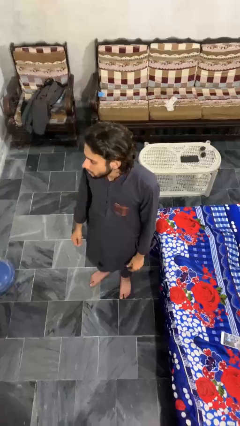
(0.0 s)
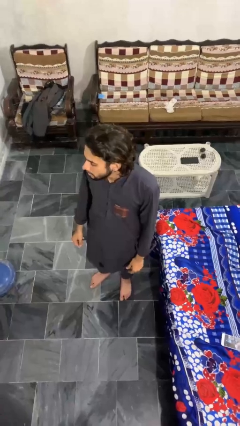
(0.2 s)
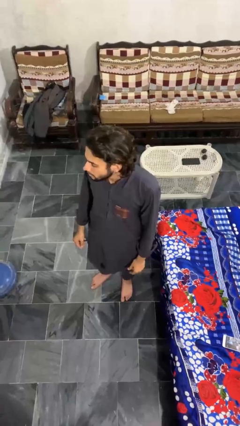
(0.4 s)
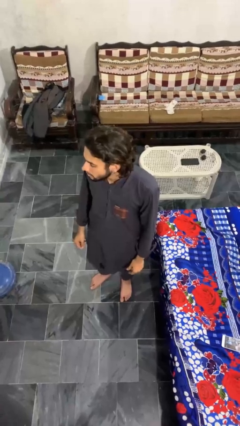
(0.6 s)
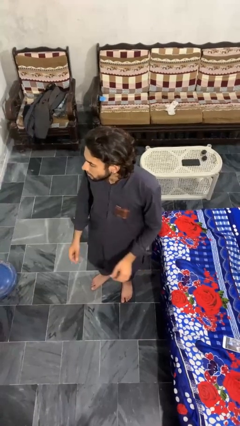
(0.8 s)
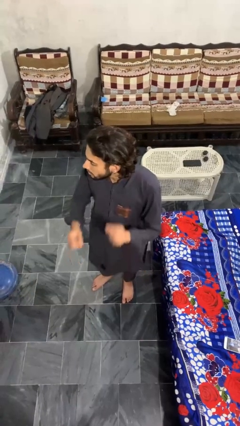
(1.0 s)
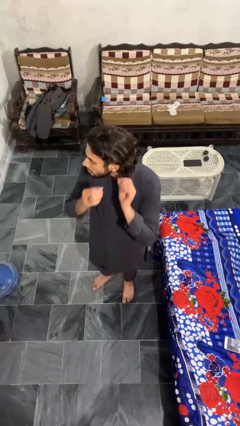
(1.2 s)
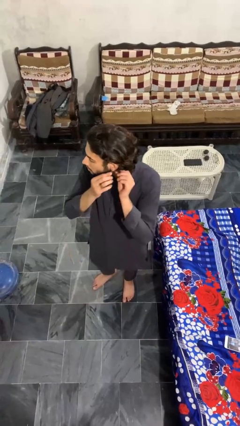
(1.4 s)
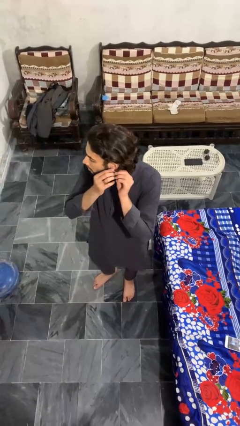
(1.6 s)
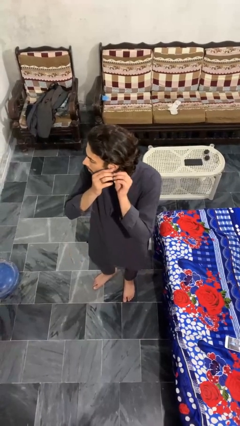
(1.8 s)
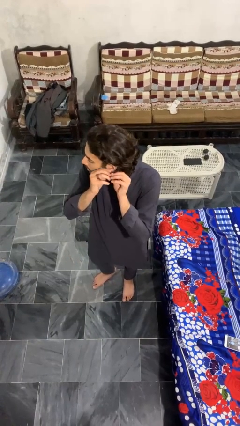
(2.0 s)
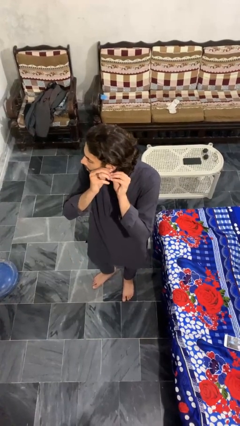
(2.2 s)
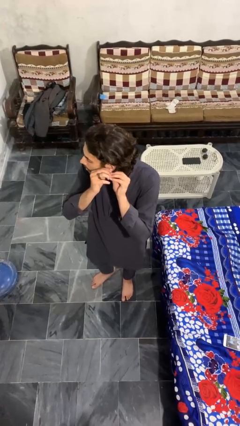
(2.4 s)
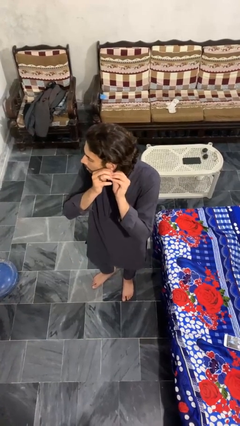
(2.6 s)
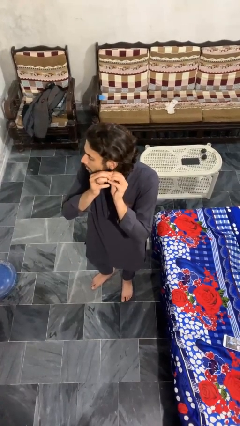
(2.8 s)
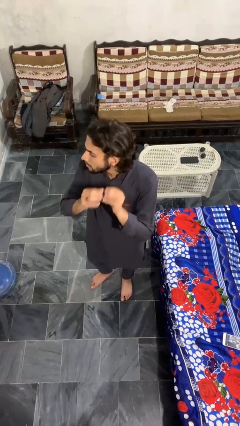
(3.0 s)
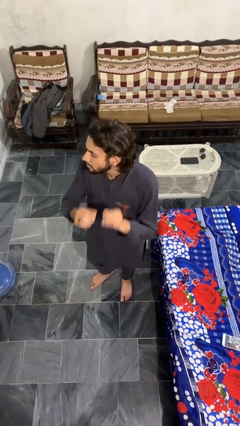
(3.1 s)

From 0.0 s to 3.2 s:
person takes off earrings

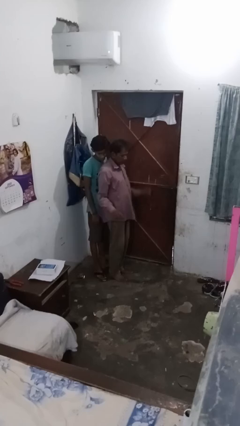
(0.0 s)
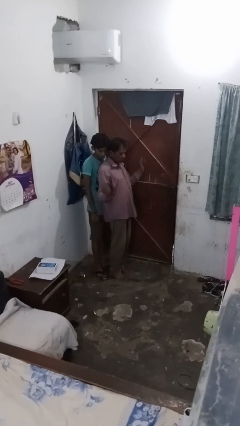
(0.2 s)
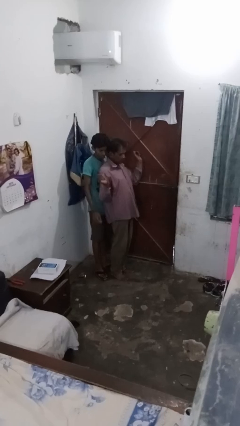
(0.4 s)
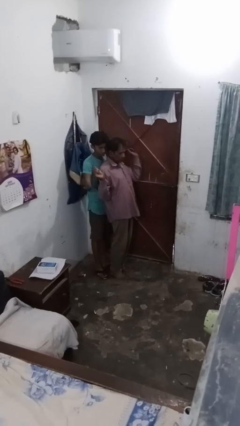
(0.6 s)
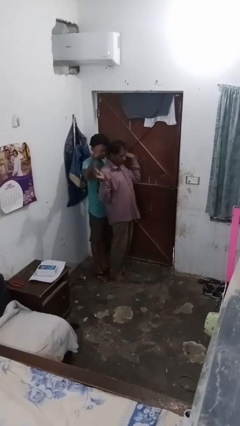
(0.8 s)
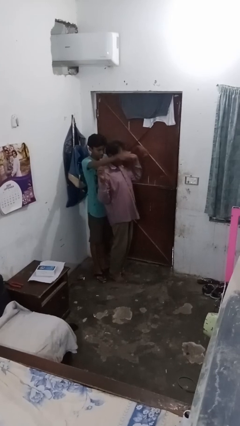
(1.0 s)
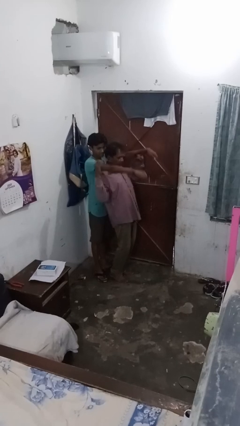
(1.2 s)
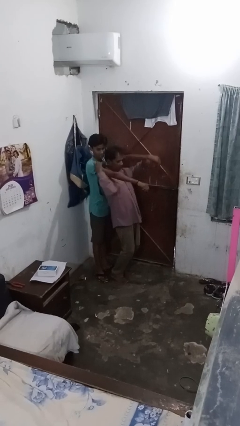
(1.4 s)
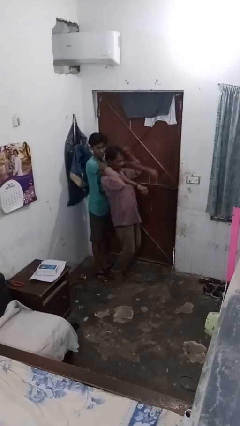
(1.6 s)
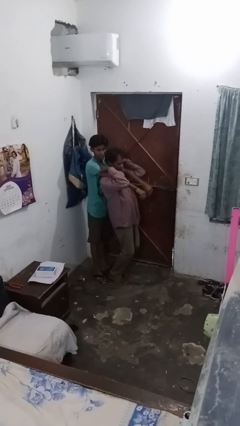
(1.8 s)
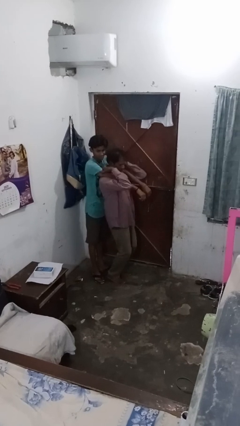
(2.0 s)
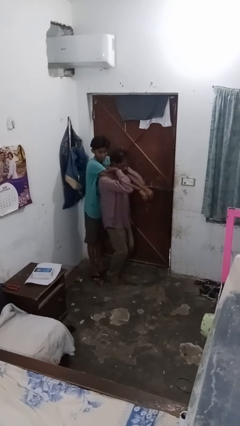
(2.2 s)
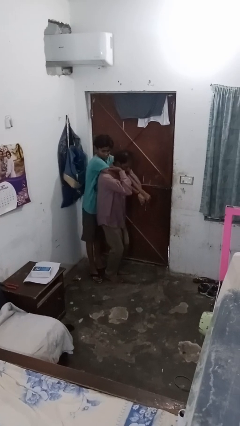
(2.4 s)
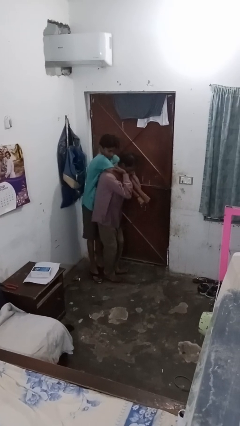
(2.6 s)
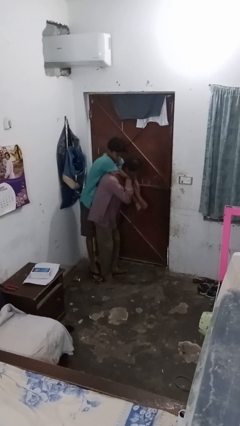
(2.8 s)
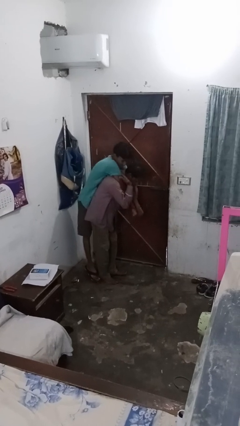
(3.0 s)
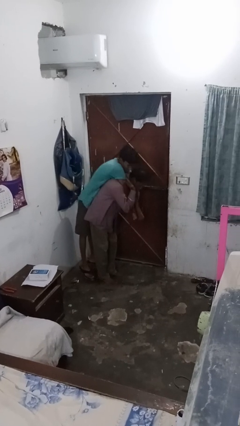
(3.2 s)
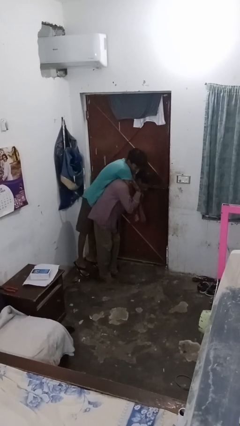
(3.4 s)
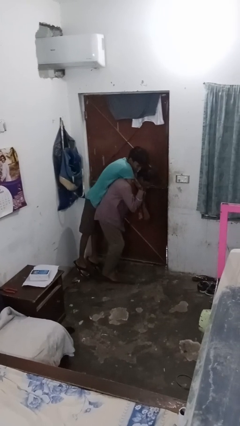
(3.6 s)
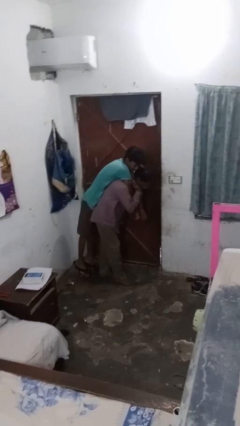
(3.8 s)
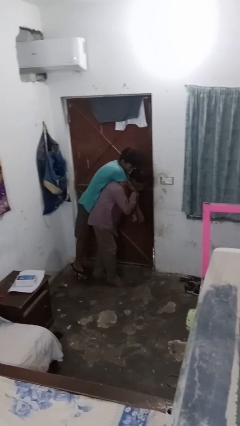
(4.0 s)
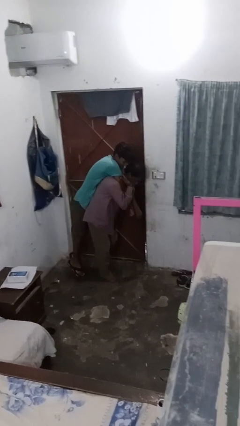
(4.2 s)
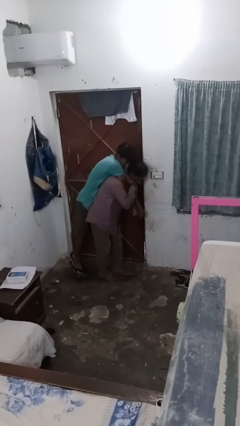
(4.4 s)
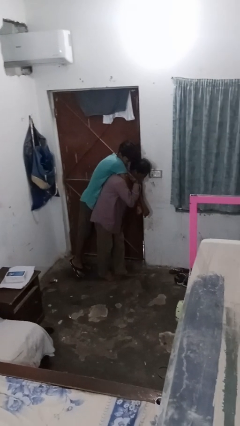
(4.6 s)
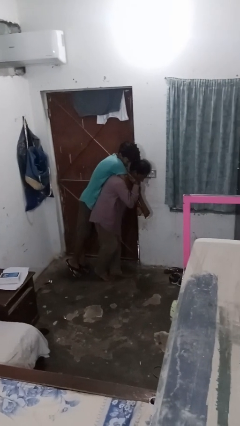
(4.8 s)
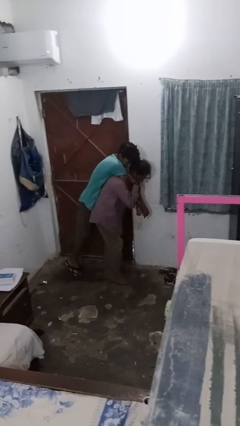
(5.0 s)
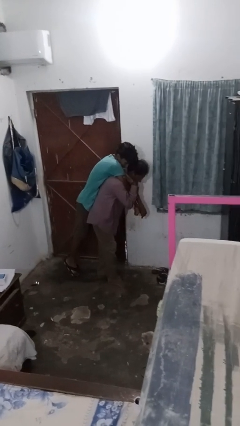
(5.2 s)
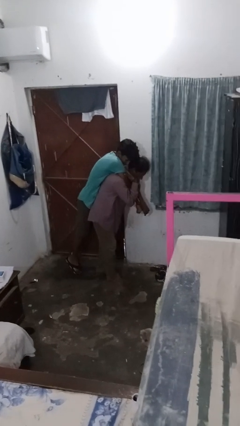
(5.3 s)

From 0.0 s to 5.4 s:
person carries person on back

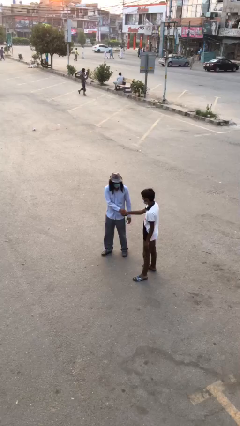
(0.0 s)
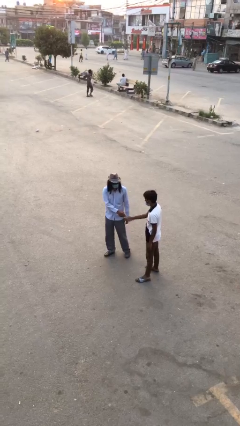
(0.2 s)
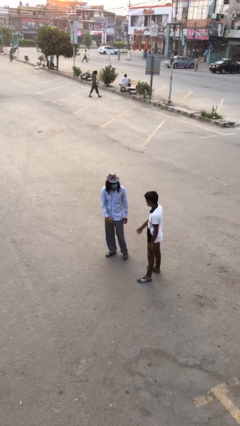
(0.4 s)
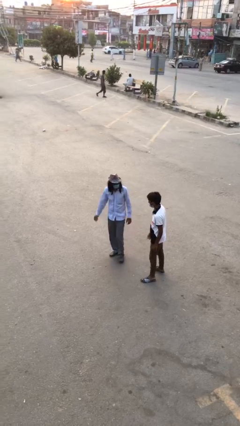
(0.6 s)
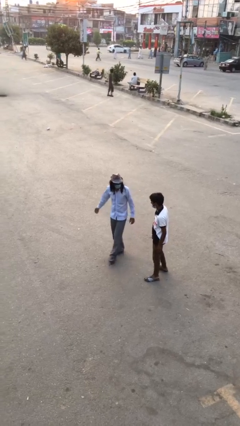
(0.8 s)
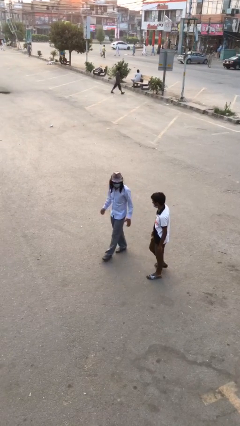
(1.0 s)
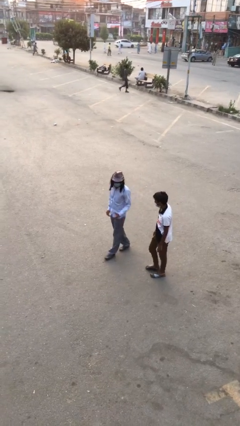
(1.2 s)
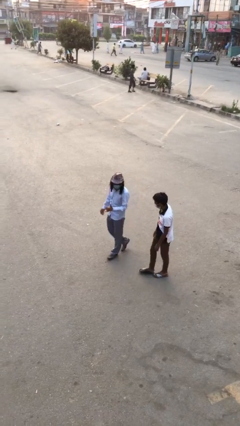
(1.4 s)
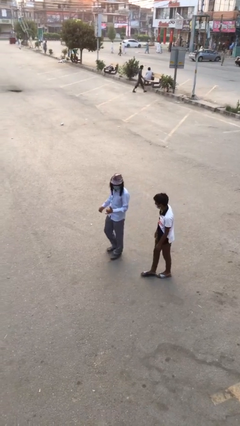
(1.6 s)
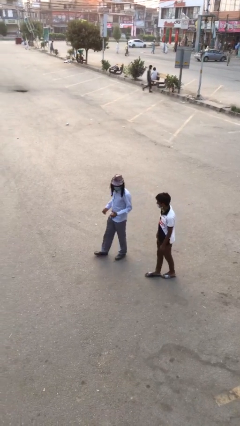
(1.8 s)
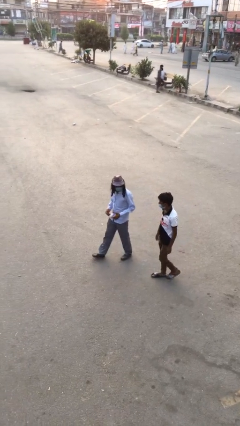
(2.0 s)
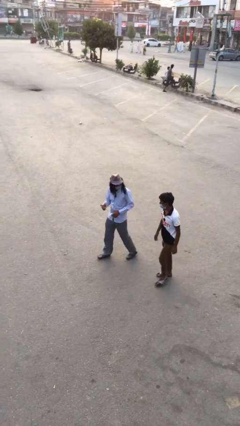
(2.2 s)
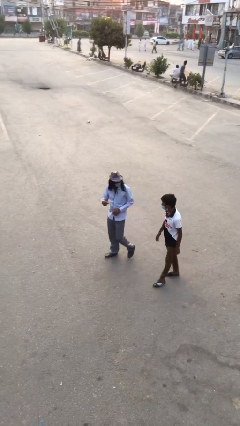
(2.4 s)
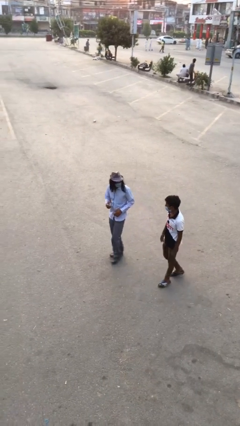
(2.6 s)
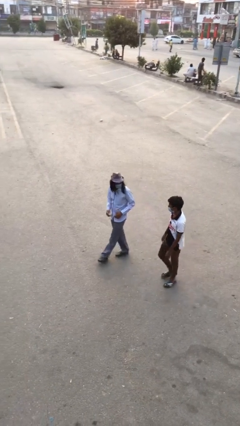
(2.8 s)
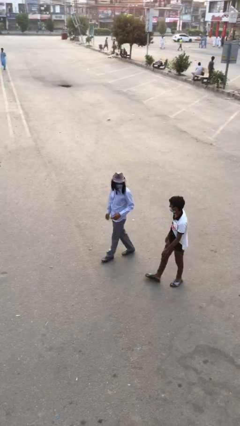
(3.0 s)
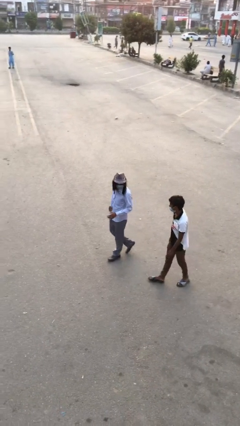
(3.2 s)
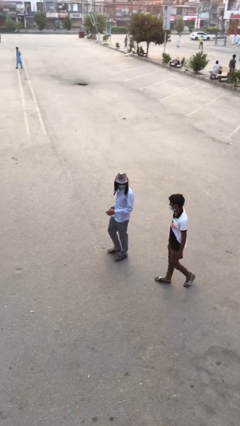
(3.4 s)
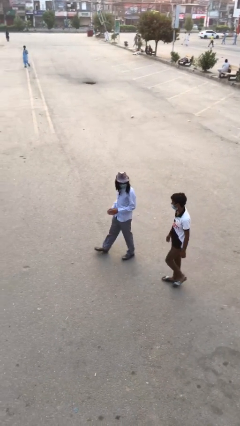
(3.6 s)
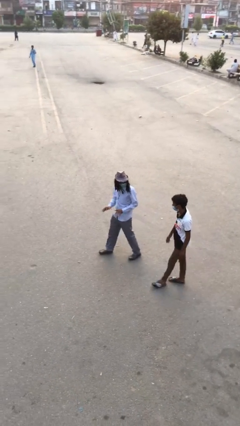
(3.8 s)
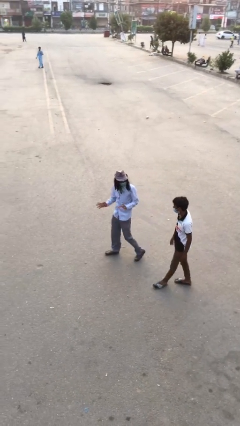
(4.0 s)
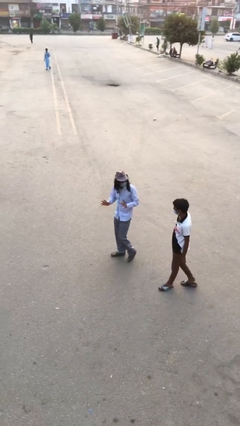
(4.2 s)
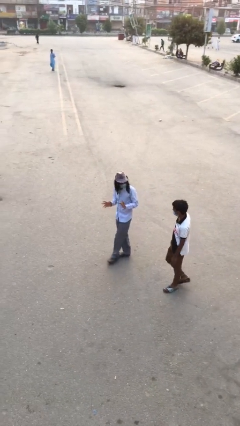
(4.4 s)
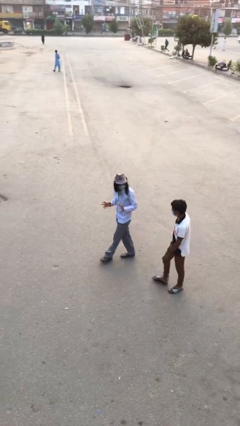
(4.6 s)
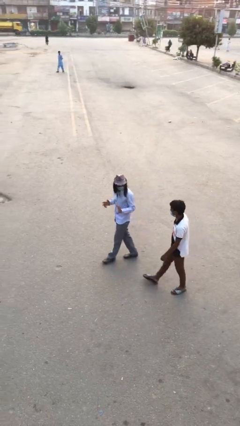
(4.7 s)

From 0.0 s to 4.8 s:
person talks to person

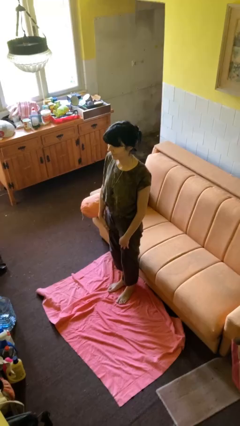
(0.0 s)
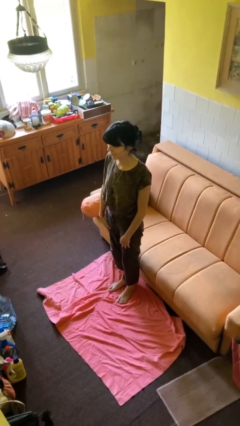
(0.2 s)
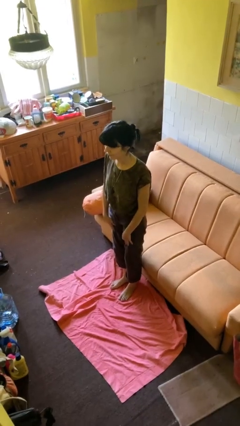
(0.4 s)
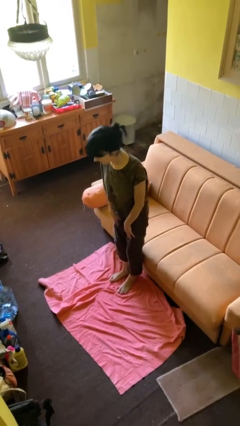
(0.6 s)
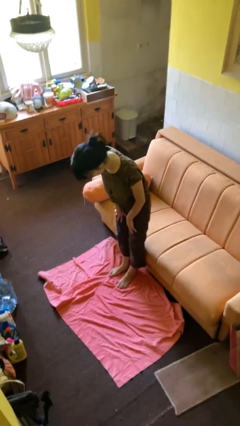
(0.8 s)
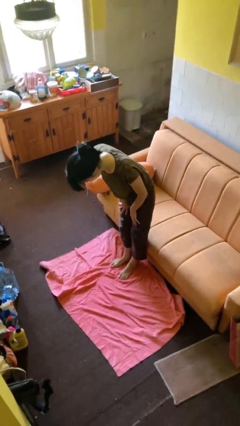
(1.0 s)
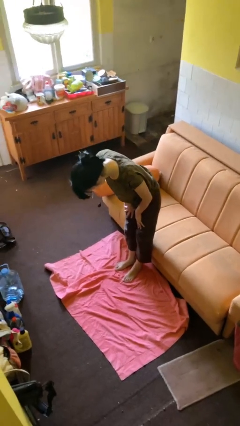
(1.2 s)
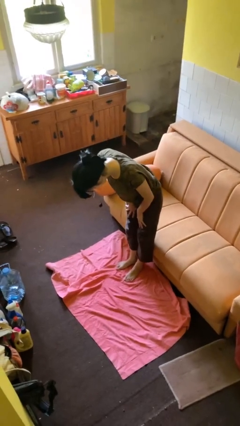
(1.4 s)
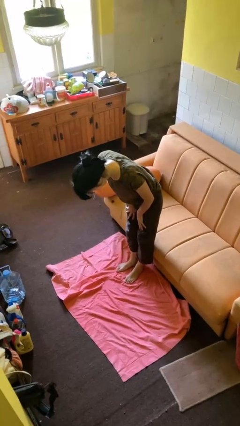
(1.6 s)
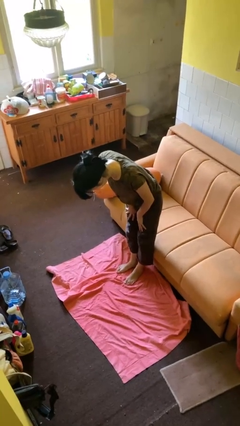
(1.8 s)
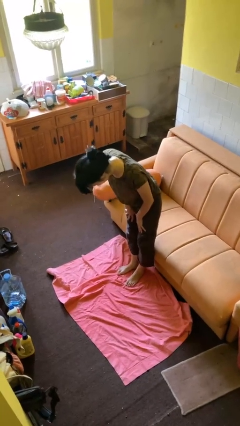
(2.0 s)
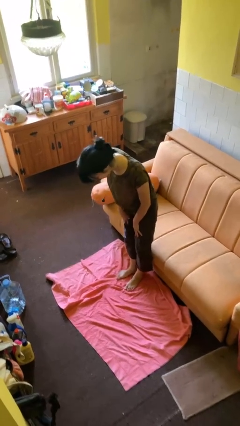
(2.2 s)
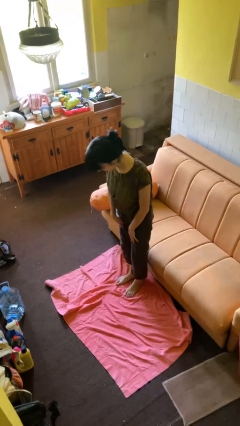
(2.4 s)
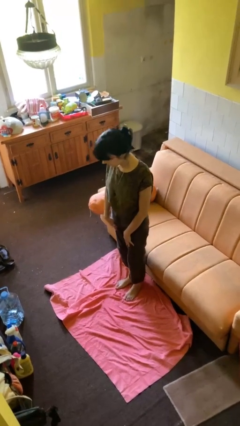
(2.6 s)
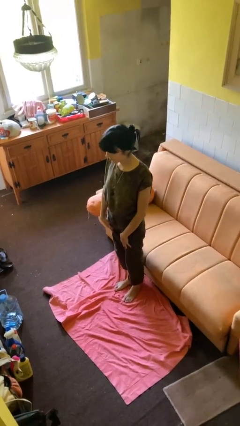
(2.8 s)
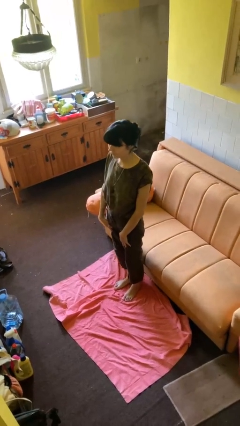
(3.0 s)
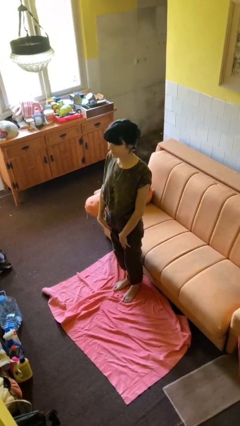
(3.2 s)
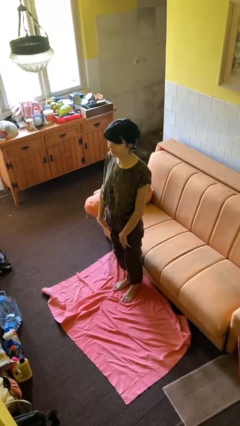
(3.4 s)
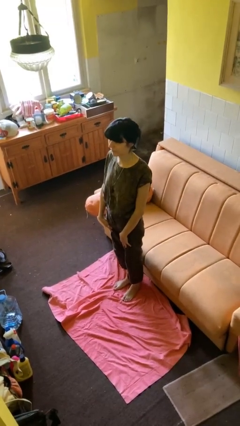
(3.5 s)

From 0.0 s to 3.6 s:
person bows

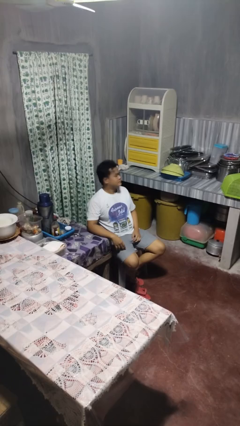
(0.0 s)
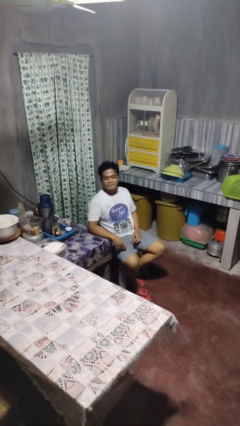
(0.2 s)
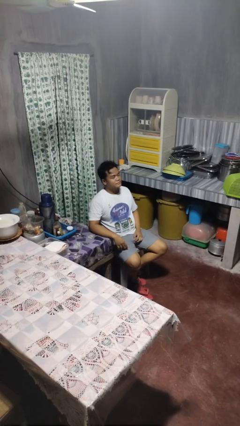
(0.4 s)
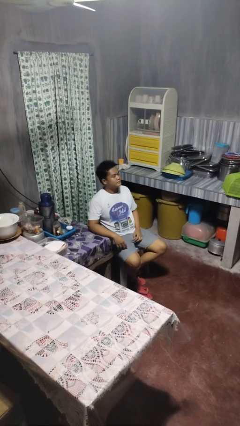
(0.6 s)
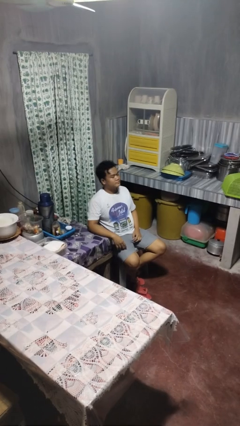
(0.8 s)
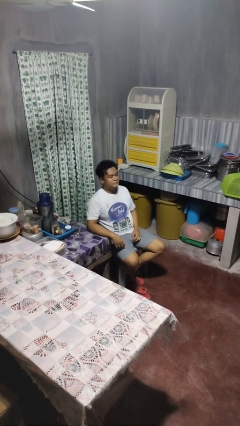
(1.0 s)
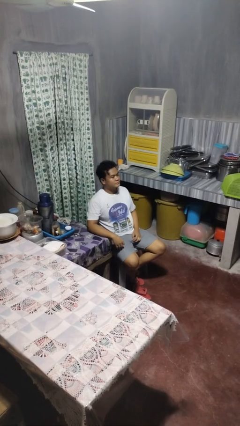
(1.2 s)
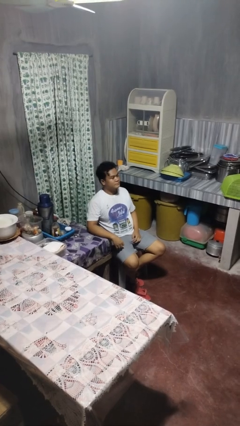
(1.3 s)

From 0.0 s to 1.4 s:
person shakes head
